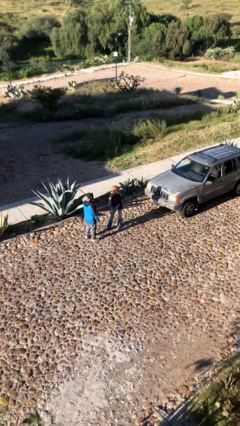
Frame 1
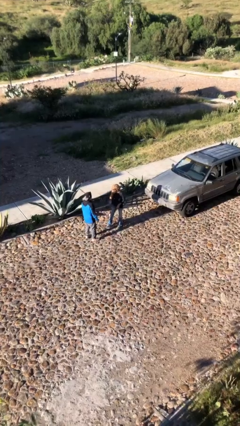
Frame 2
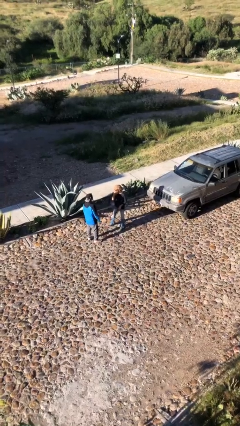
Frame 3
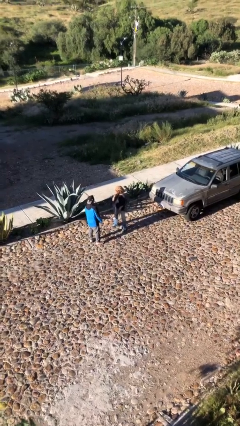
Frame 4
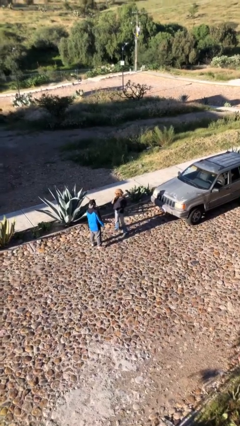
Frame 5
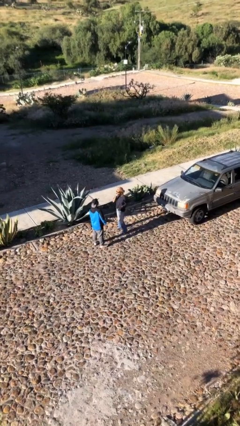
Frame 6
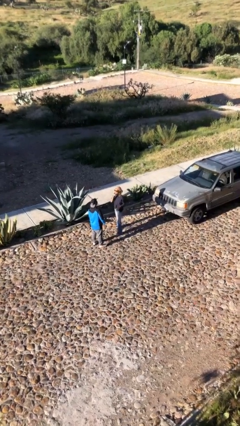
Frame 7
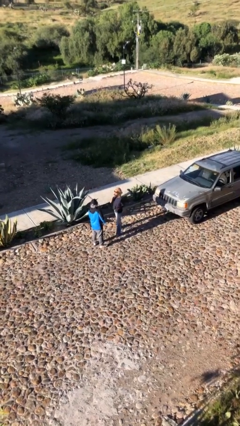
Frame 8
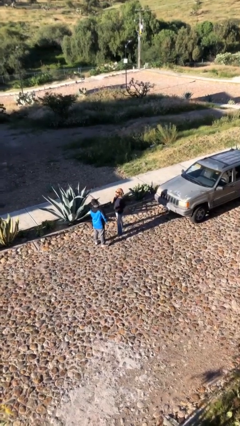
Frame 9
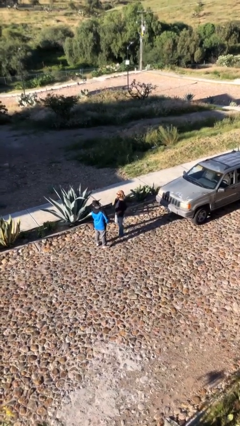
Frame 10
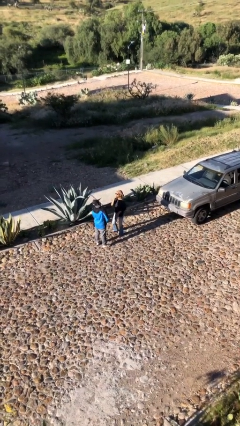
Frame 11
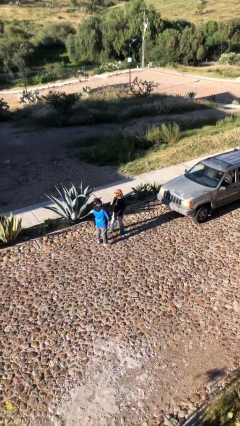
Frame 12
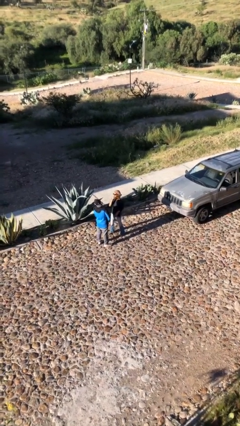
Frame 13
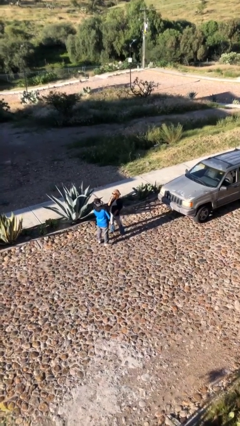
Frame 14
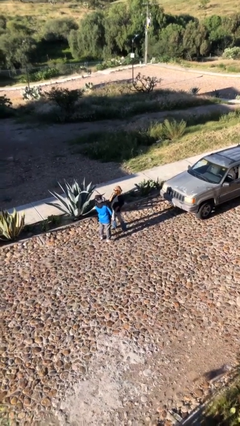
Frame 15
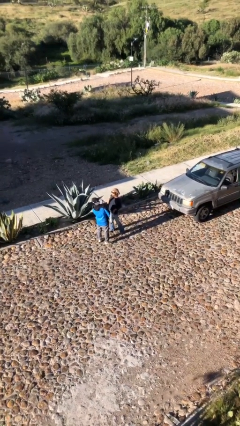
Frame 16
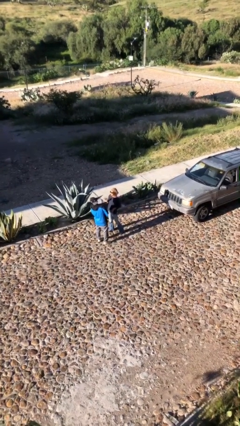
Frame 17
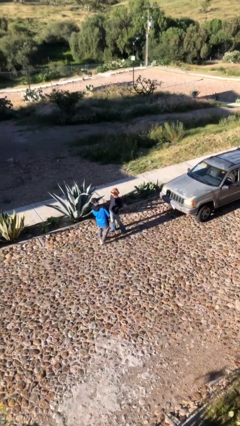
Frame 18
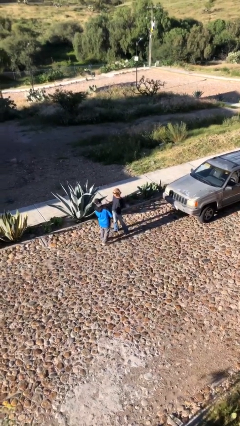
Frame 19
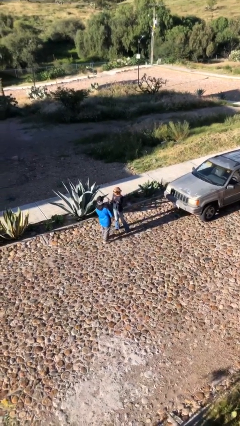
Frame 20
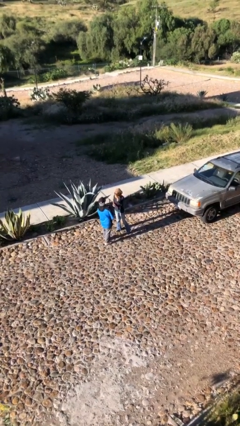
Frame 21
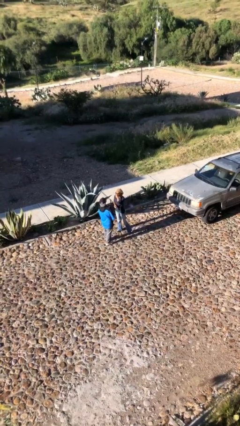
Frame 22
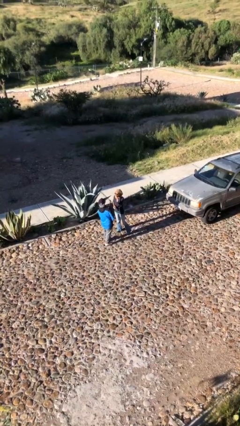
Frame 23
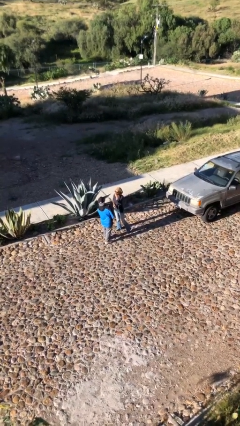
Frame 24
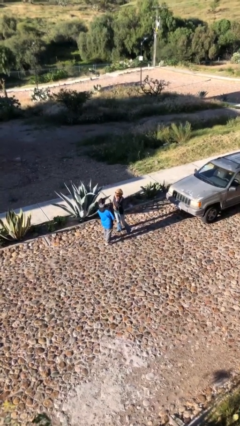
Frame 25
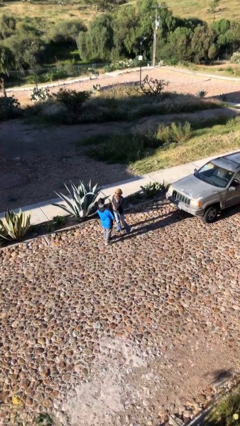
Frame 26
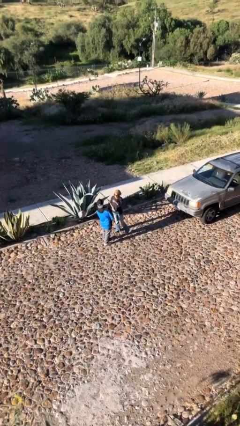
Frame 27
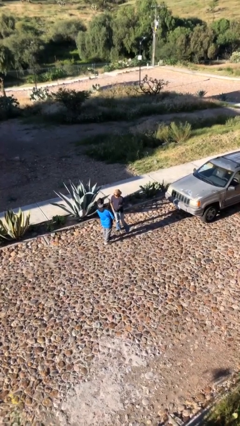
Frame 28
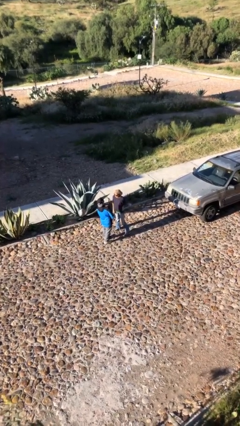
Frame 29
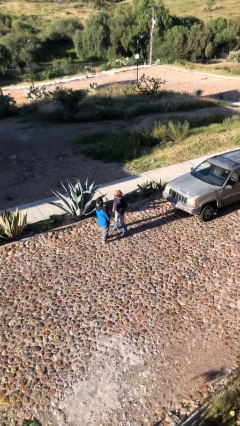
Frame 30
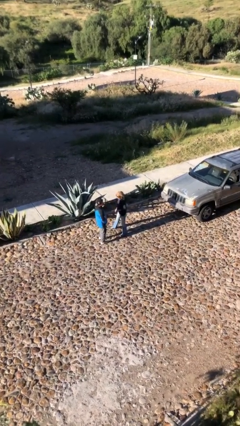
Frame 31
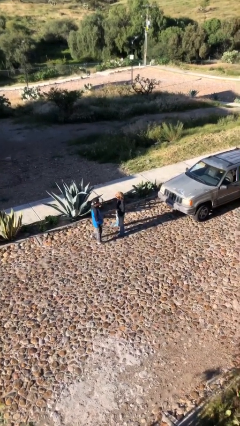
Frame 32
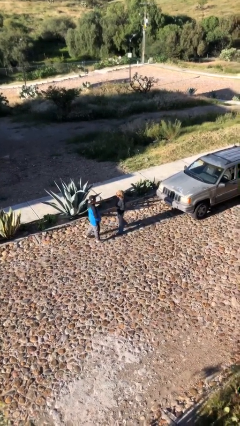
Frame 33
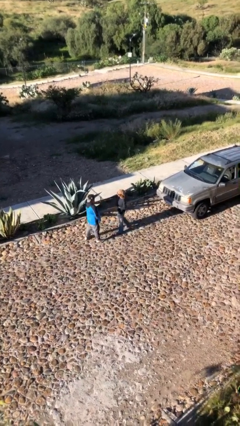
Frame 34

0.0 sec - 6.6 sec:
person talks to person

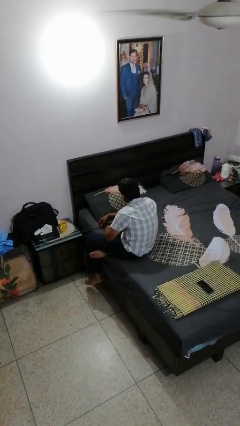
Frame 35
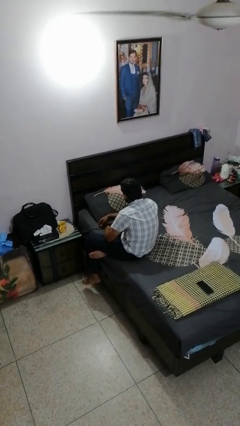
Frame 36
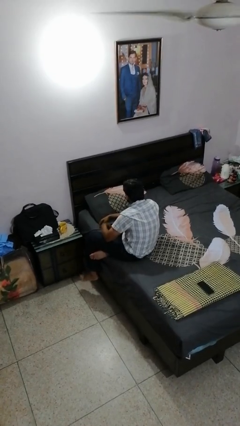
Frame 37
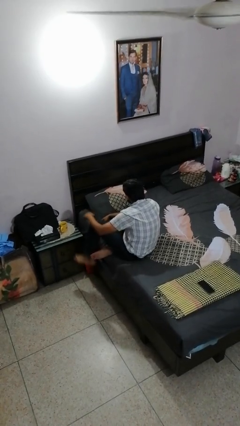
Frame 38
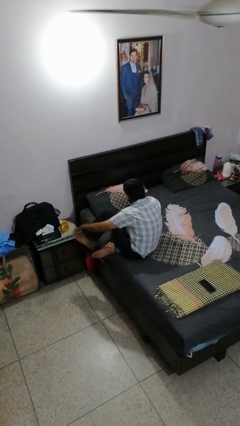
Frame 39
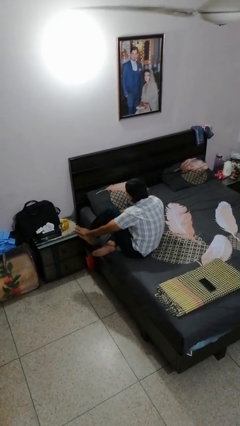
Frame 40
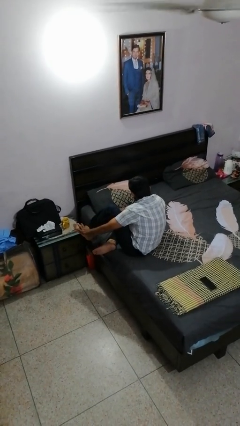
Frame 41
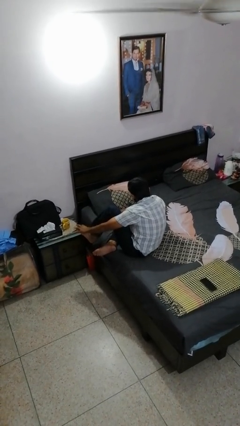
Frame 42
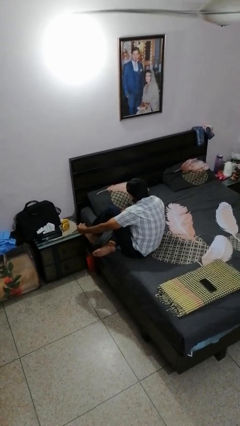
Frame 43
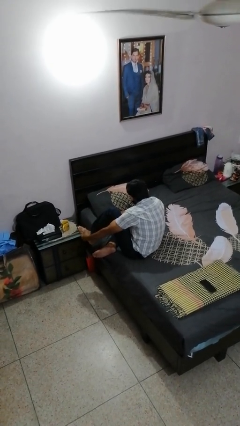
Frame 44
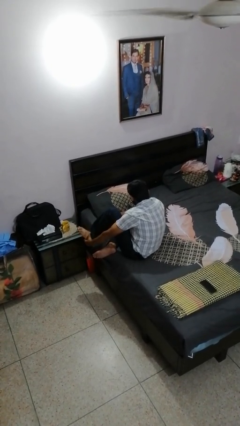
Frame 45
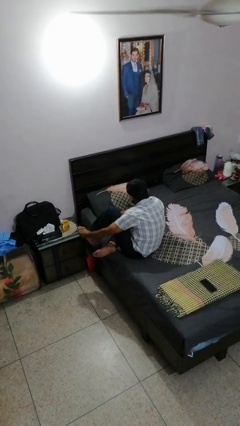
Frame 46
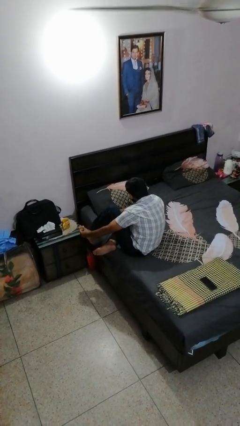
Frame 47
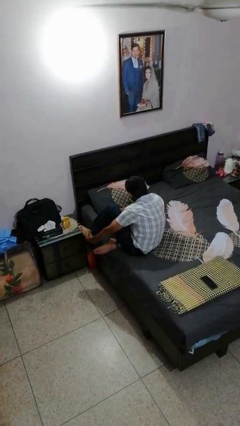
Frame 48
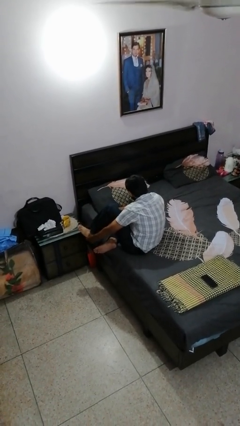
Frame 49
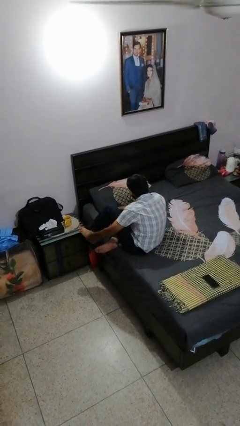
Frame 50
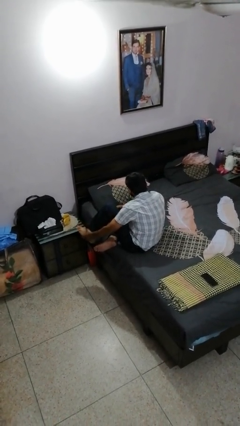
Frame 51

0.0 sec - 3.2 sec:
person rubs foot

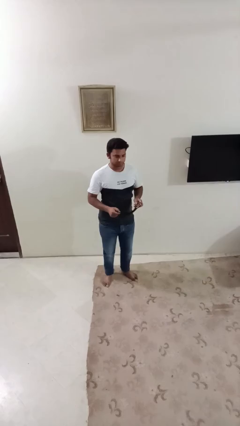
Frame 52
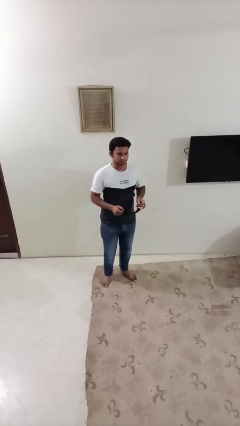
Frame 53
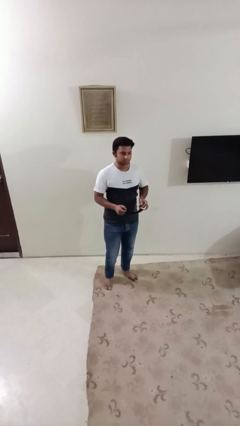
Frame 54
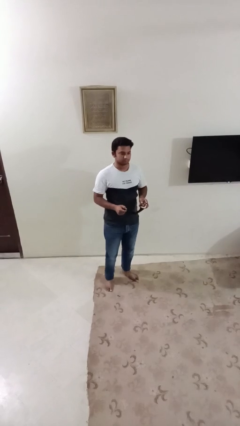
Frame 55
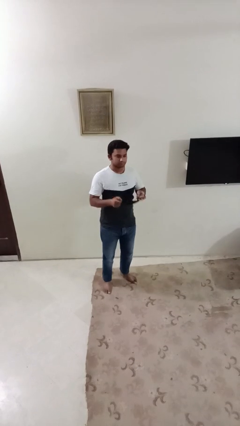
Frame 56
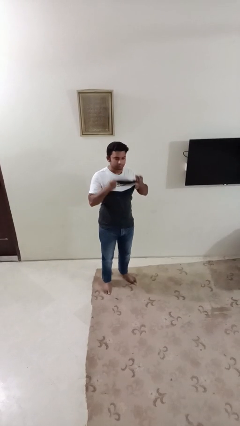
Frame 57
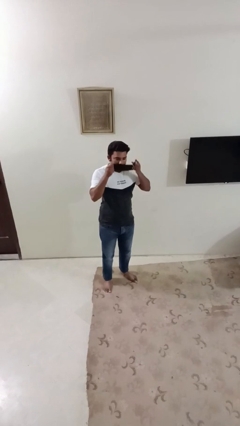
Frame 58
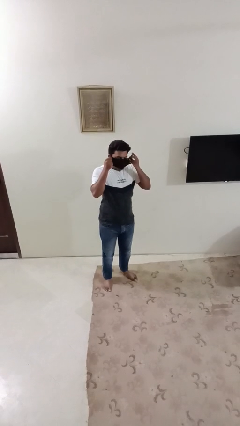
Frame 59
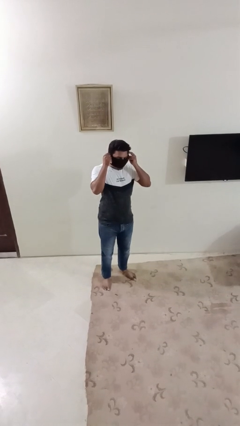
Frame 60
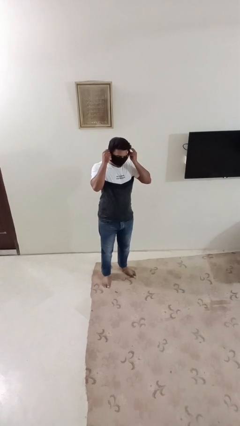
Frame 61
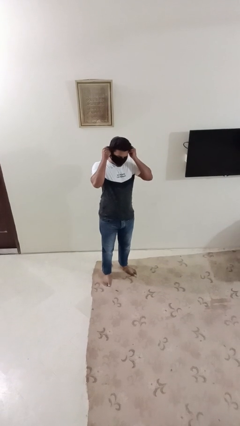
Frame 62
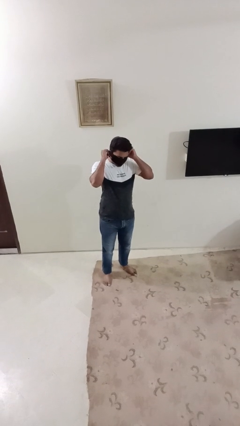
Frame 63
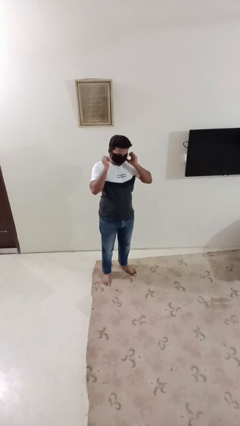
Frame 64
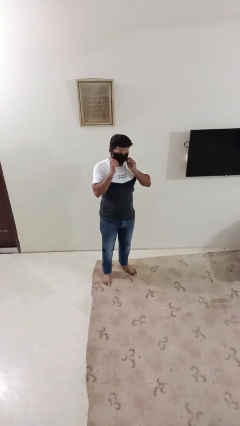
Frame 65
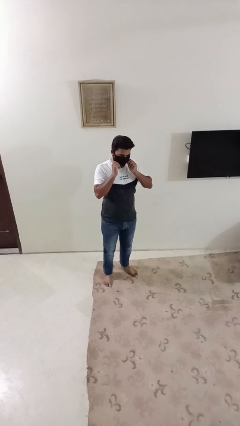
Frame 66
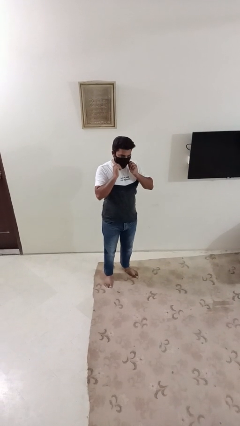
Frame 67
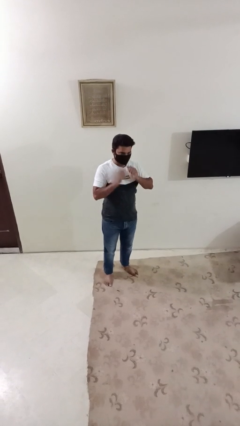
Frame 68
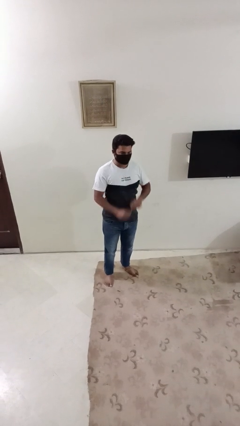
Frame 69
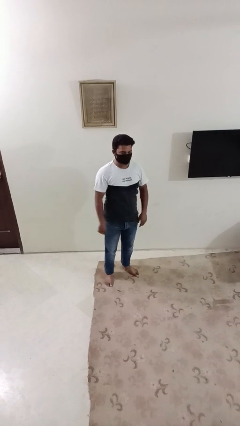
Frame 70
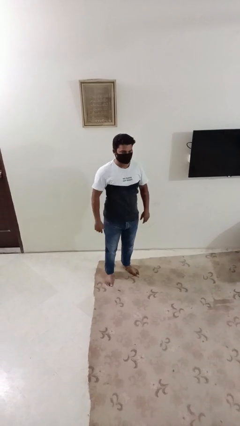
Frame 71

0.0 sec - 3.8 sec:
person puts on facemask

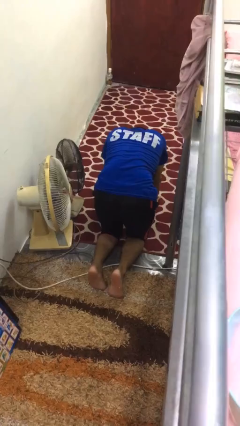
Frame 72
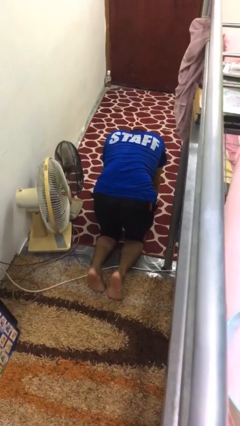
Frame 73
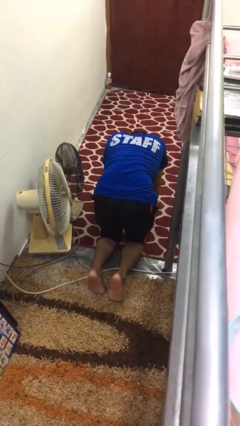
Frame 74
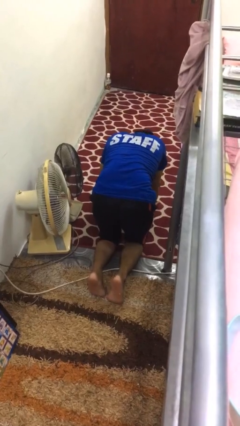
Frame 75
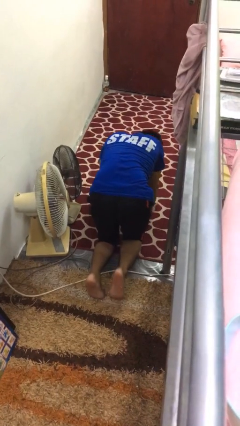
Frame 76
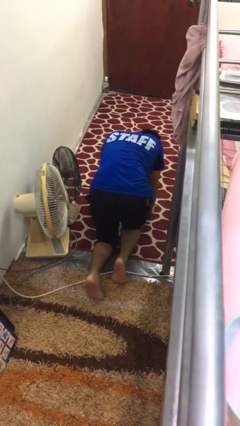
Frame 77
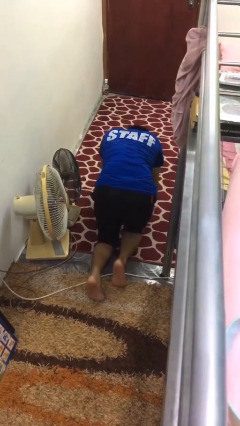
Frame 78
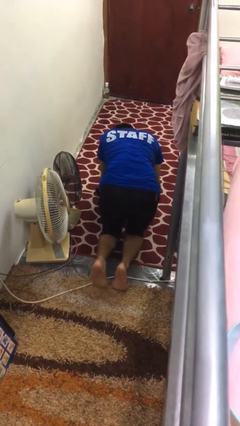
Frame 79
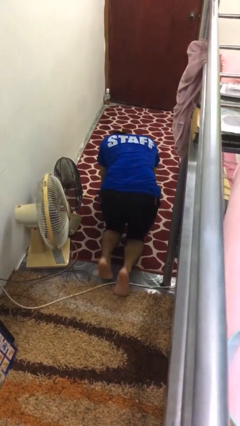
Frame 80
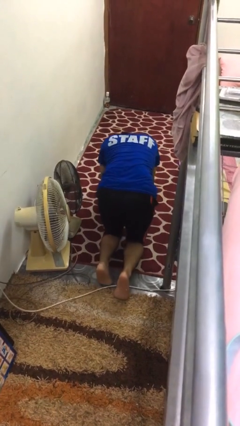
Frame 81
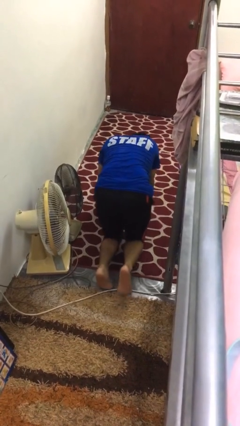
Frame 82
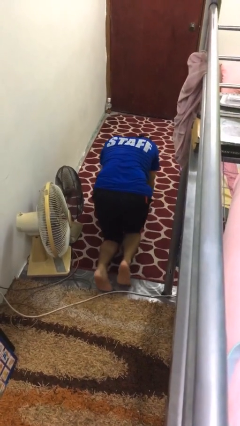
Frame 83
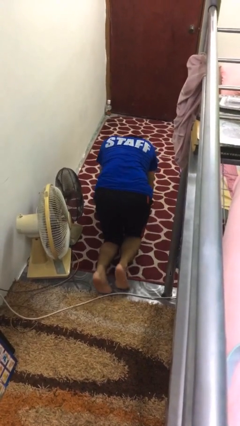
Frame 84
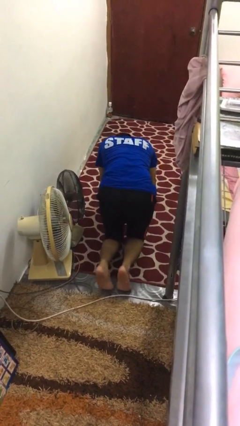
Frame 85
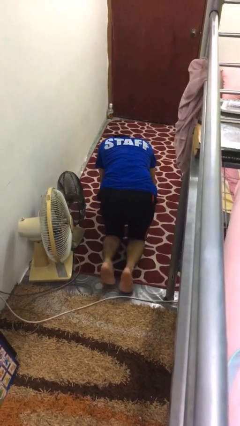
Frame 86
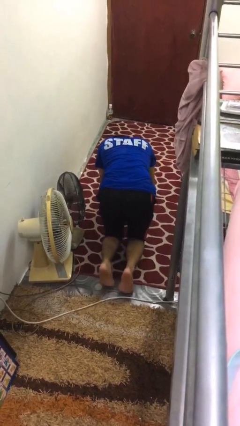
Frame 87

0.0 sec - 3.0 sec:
person crawls

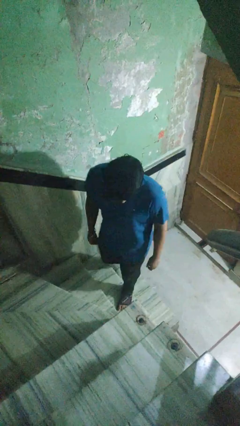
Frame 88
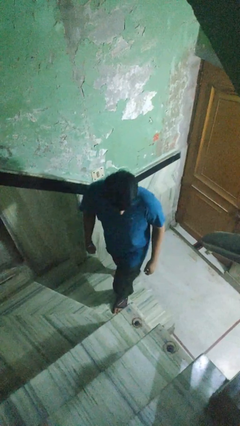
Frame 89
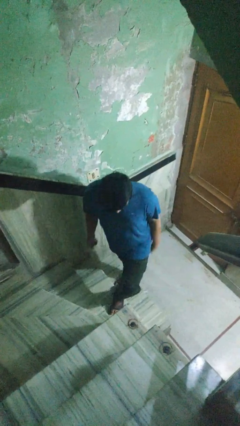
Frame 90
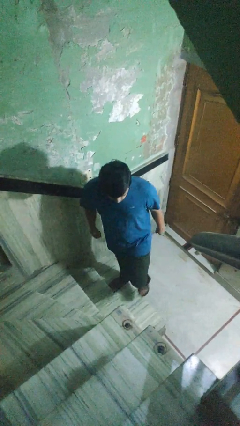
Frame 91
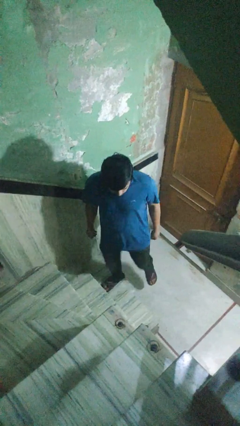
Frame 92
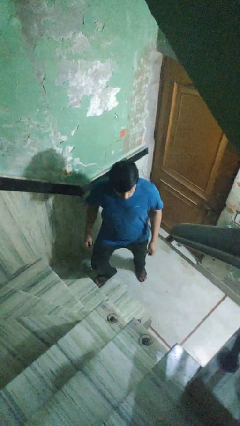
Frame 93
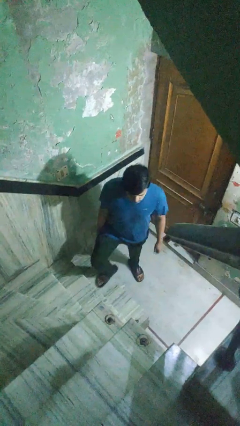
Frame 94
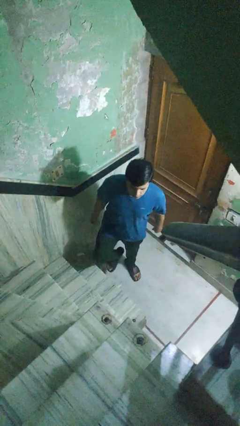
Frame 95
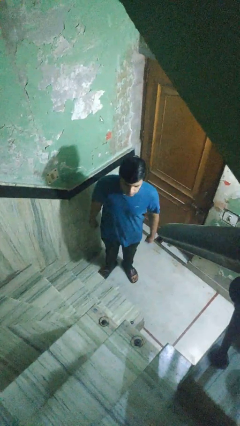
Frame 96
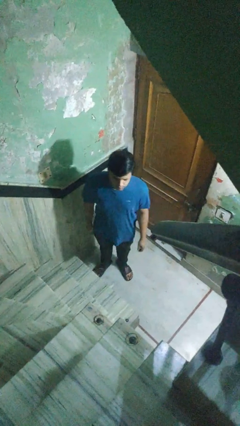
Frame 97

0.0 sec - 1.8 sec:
person climbs down stairs
